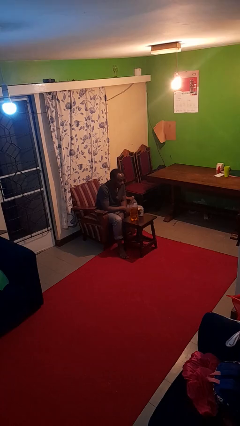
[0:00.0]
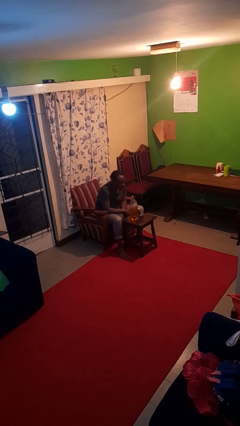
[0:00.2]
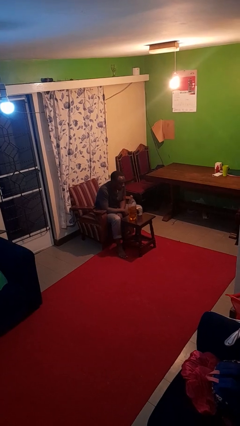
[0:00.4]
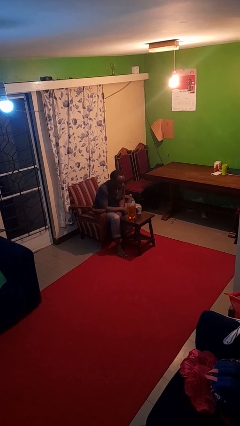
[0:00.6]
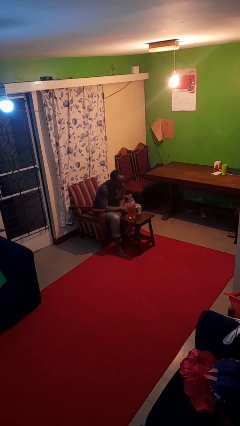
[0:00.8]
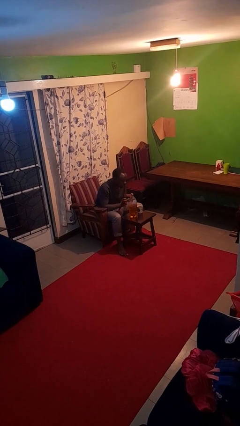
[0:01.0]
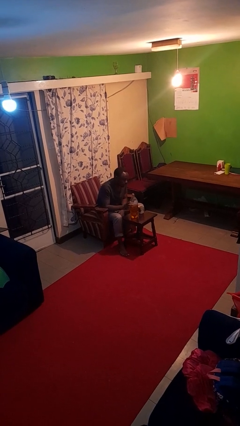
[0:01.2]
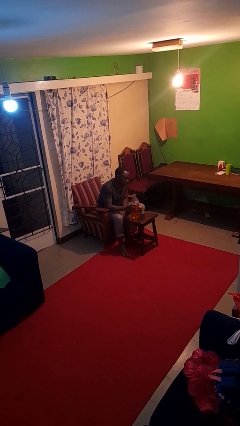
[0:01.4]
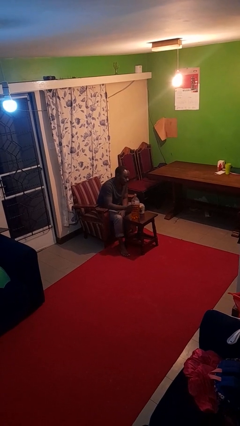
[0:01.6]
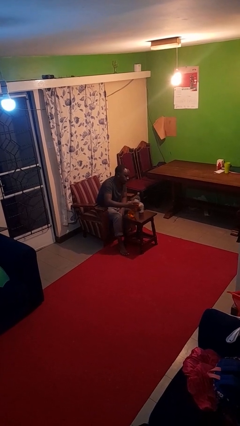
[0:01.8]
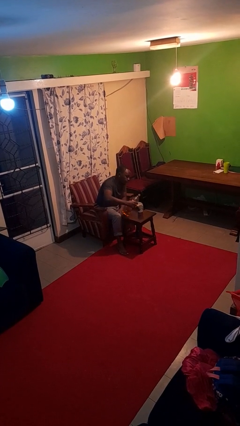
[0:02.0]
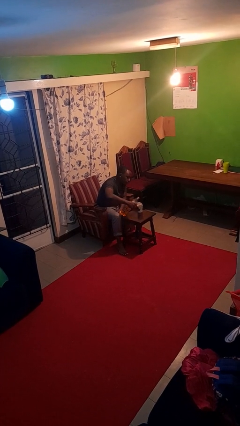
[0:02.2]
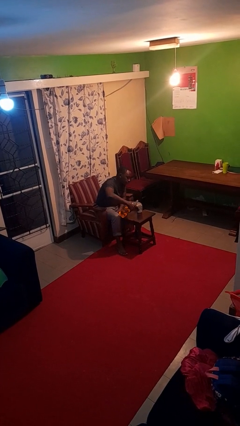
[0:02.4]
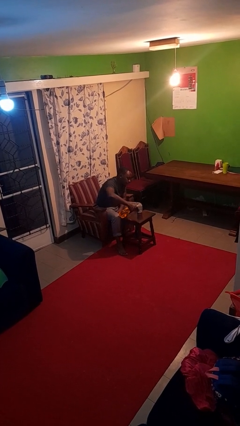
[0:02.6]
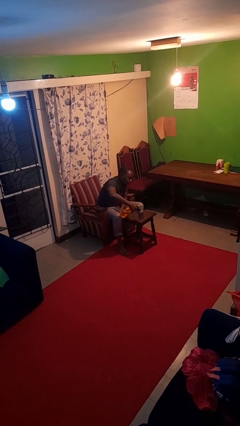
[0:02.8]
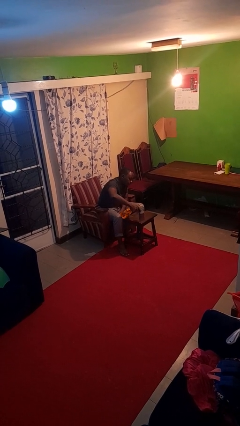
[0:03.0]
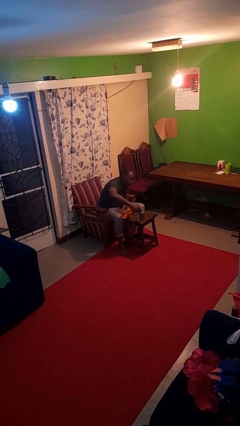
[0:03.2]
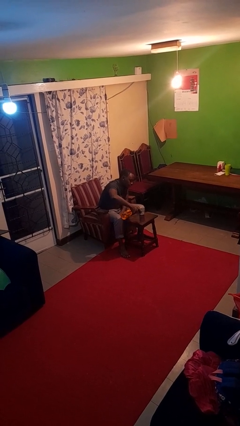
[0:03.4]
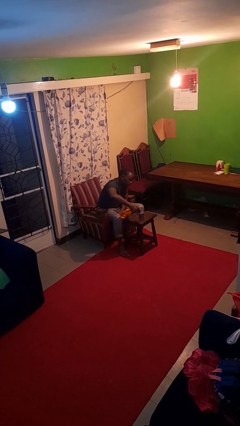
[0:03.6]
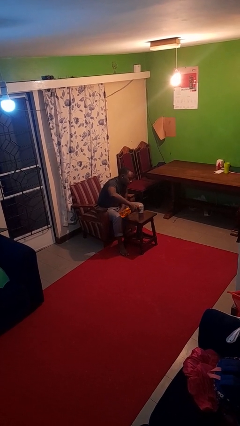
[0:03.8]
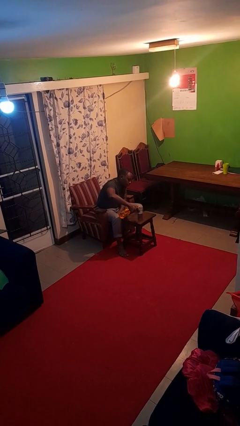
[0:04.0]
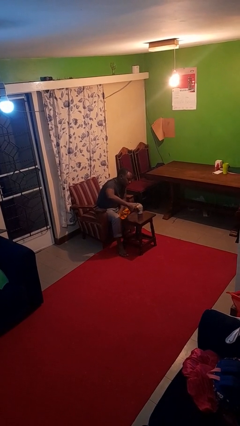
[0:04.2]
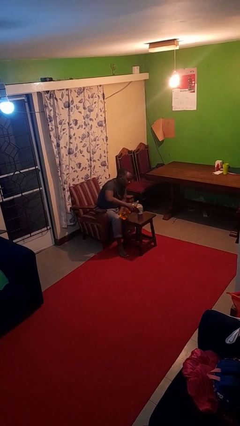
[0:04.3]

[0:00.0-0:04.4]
person pours liquid into cup

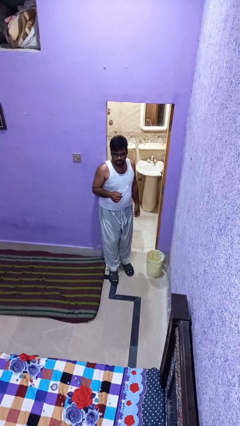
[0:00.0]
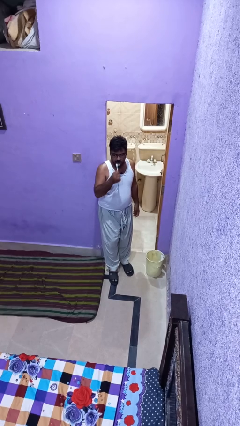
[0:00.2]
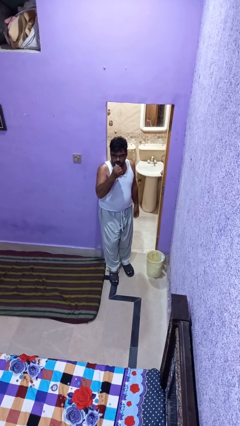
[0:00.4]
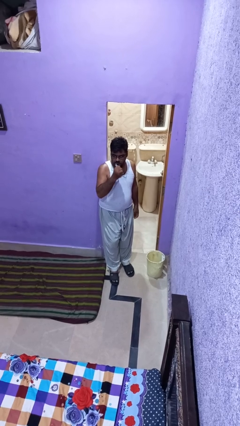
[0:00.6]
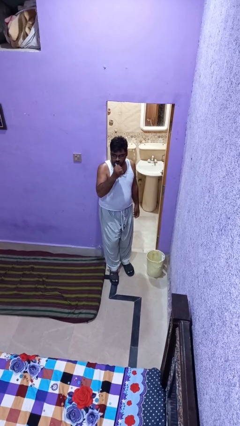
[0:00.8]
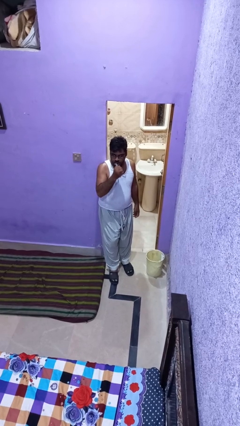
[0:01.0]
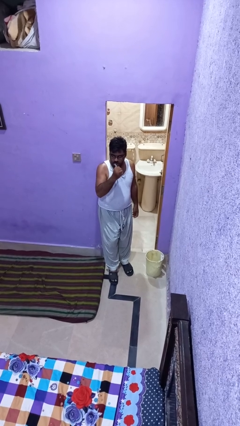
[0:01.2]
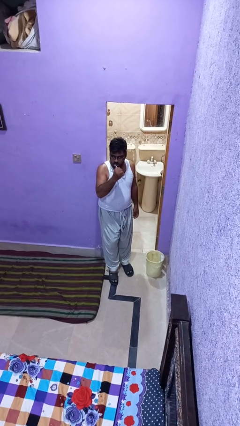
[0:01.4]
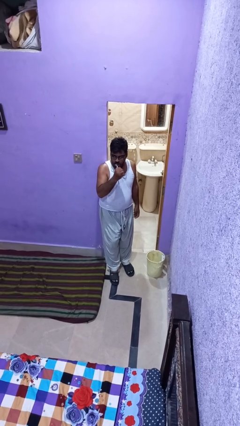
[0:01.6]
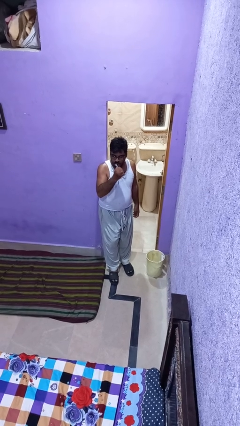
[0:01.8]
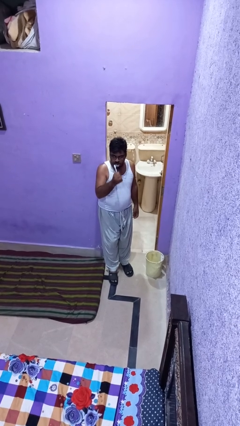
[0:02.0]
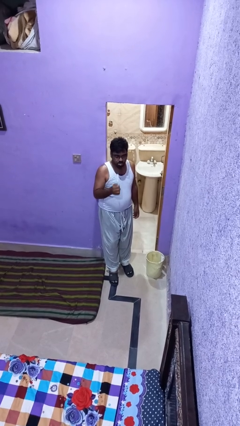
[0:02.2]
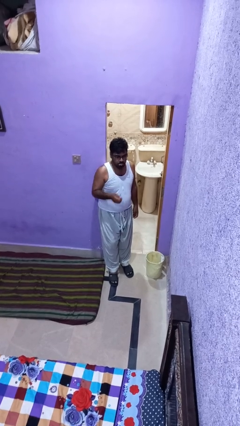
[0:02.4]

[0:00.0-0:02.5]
person brushes teeth

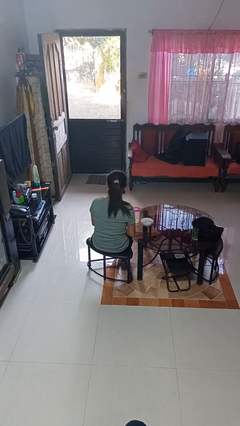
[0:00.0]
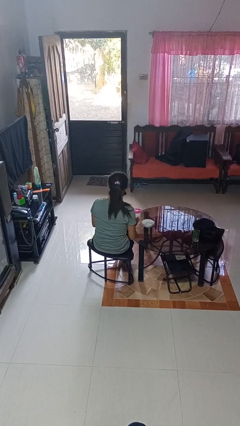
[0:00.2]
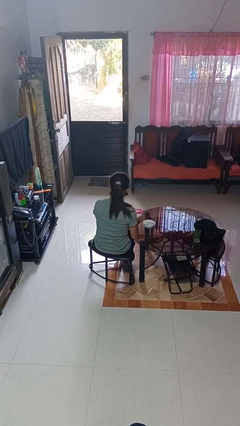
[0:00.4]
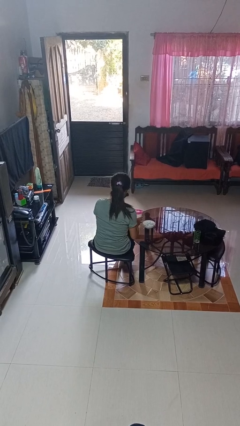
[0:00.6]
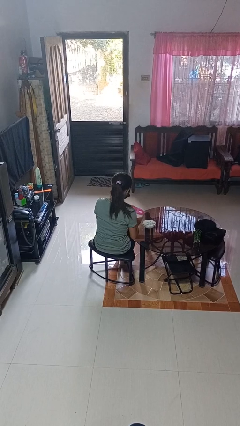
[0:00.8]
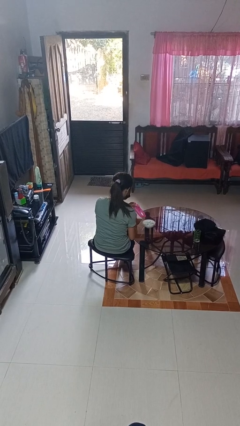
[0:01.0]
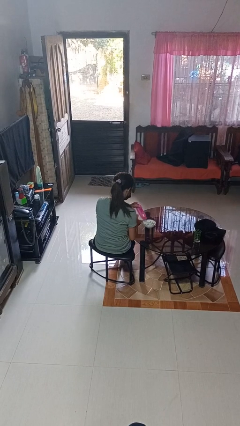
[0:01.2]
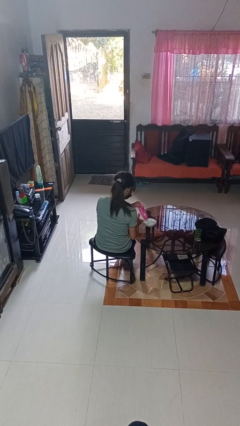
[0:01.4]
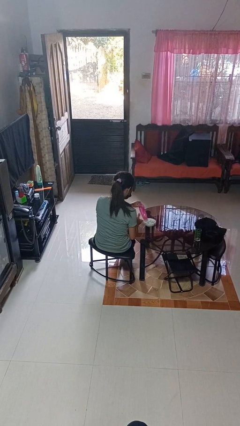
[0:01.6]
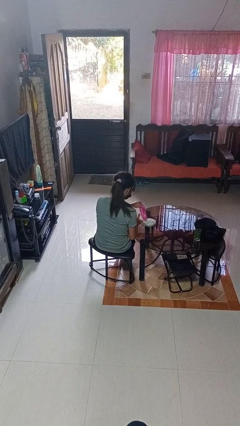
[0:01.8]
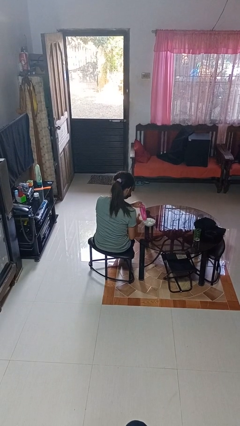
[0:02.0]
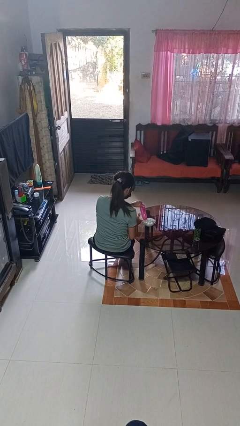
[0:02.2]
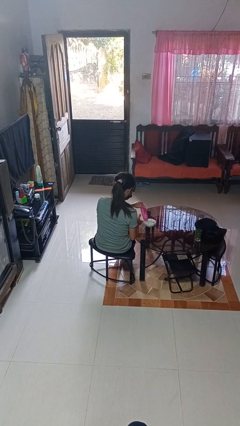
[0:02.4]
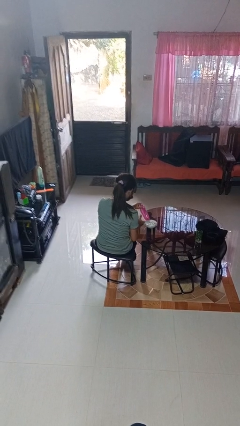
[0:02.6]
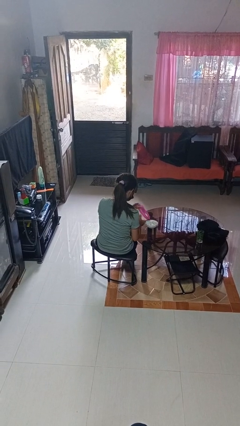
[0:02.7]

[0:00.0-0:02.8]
person pours into bowl

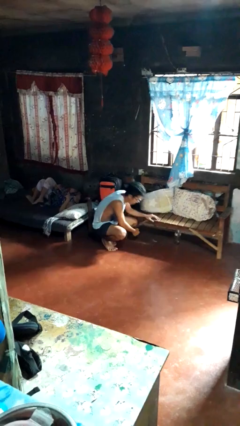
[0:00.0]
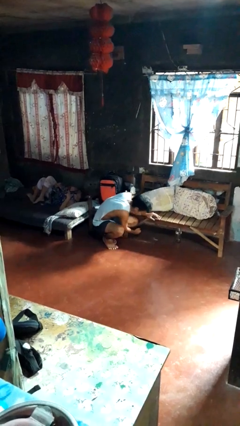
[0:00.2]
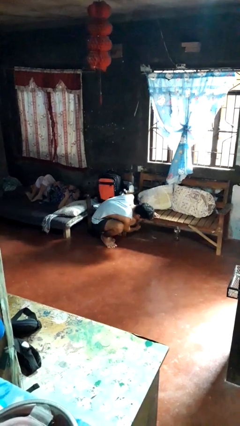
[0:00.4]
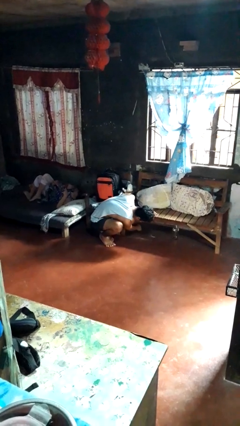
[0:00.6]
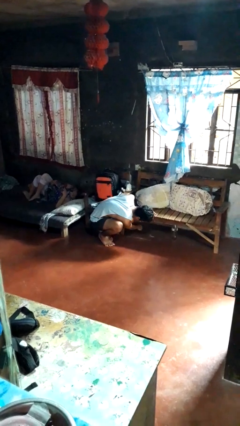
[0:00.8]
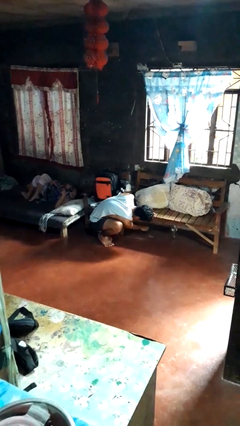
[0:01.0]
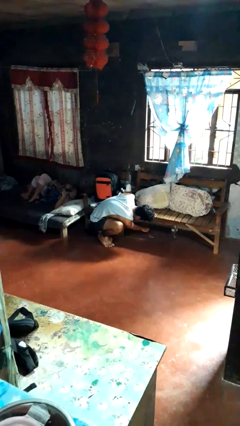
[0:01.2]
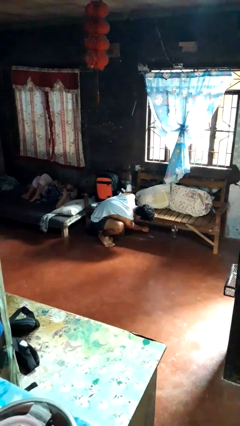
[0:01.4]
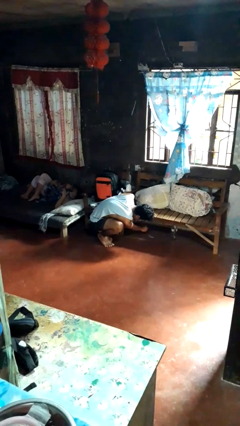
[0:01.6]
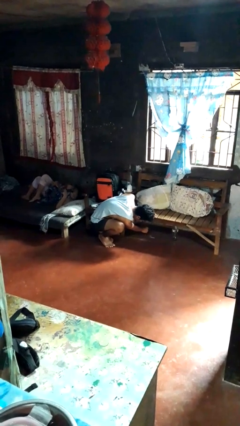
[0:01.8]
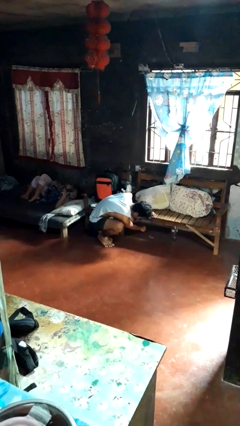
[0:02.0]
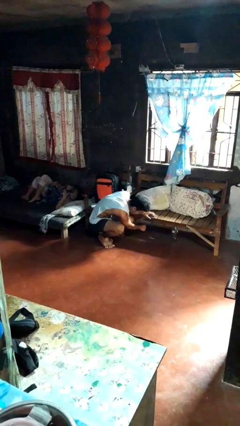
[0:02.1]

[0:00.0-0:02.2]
person searches under couch

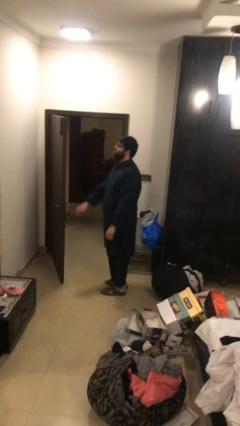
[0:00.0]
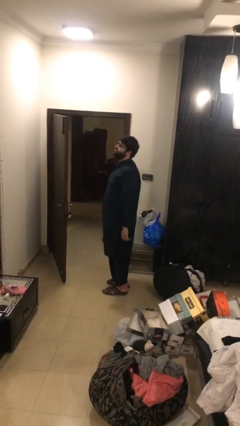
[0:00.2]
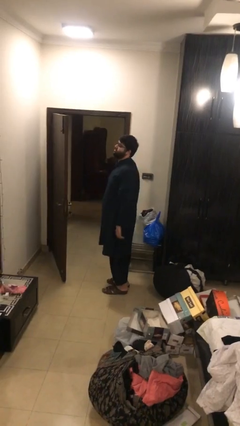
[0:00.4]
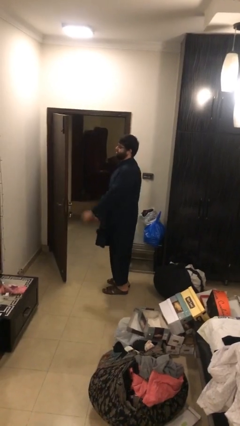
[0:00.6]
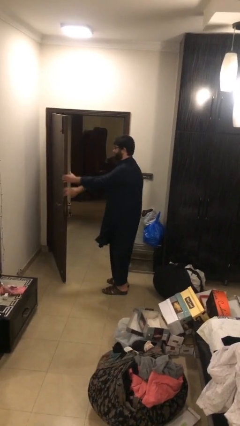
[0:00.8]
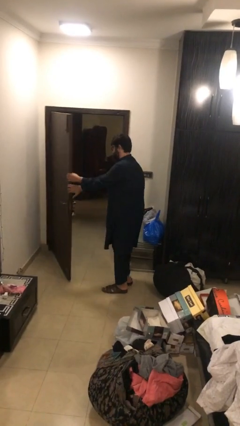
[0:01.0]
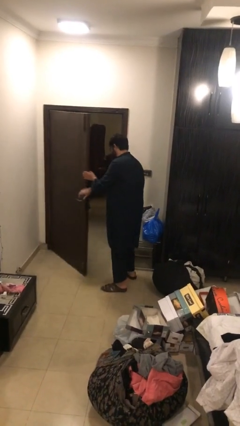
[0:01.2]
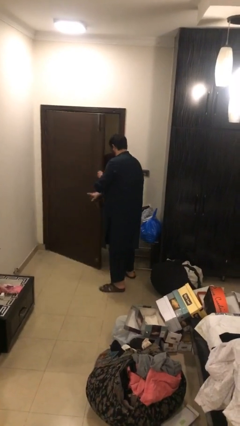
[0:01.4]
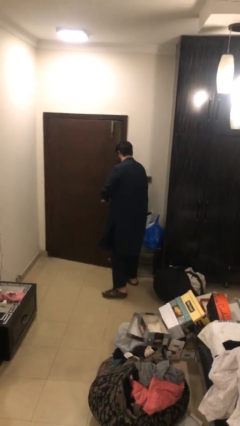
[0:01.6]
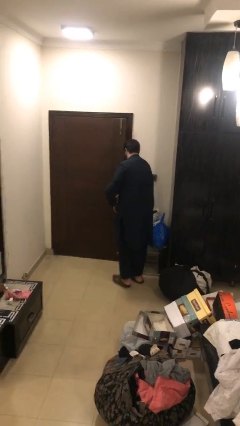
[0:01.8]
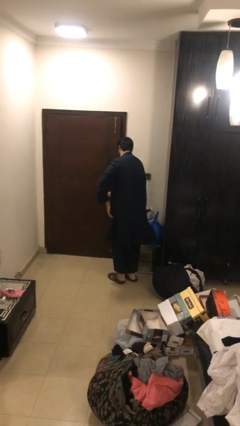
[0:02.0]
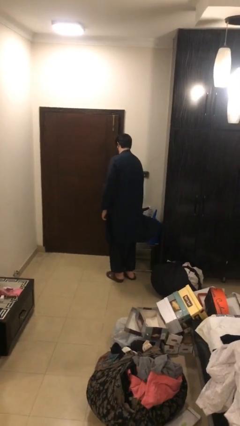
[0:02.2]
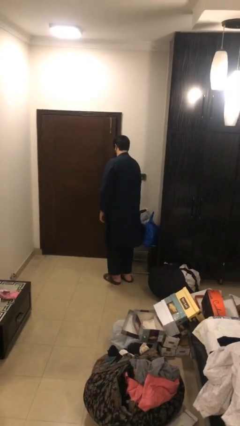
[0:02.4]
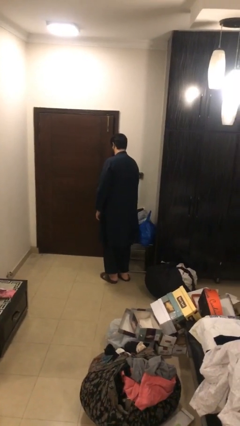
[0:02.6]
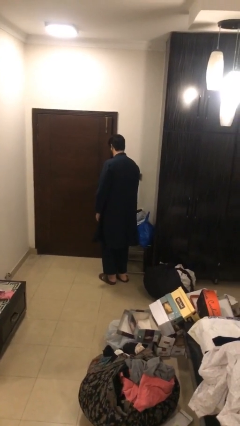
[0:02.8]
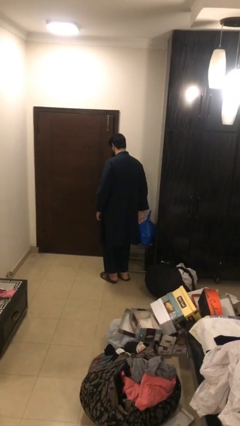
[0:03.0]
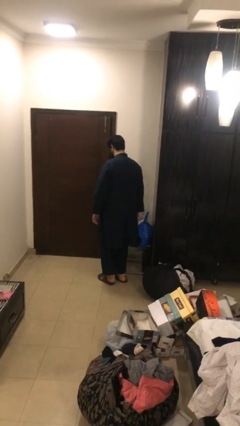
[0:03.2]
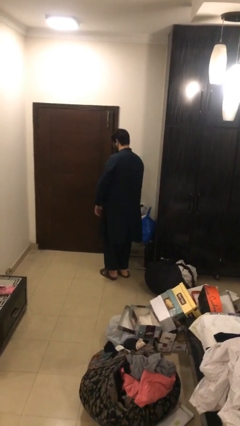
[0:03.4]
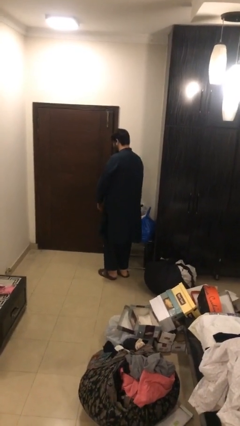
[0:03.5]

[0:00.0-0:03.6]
person closes facility door

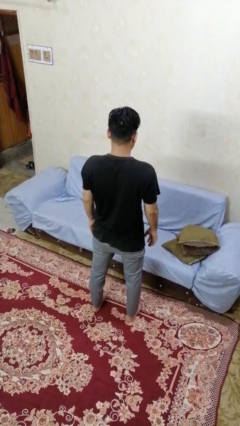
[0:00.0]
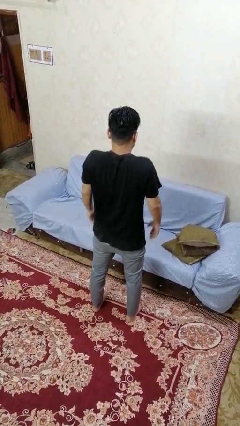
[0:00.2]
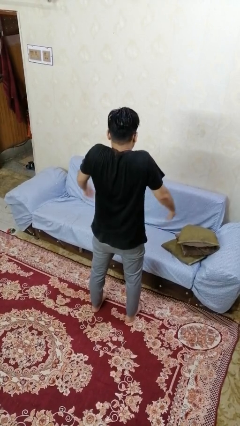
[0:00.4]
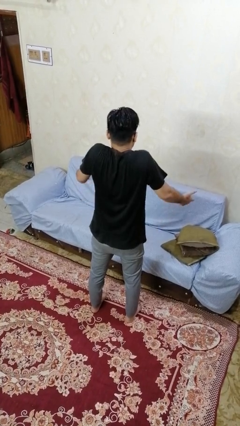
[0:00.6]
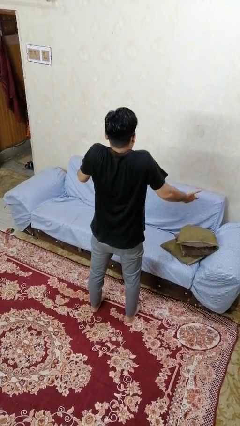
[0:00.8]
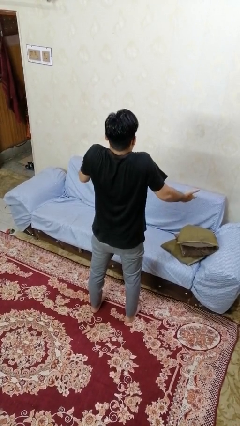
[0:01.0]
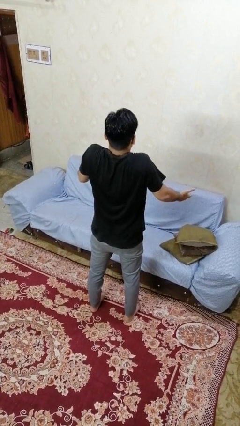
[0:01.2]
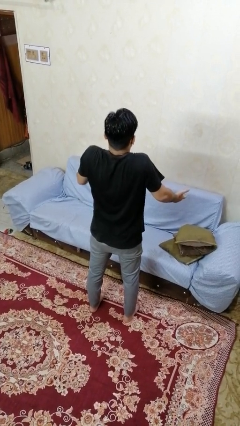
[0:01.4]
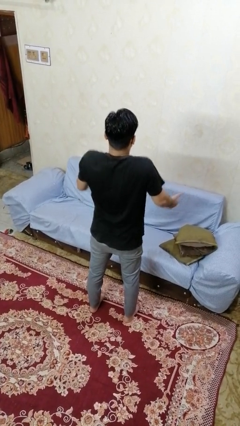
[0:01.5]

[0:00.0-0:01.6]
person shrugs

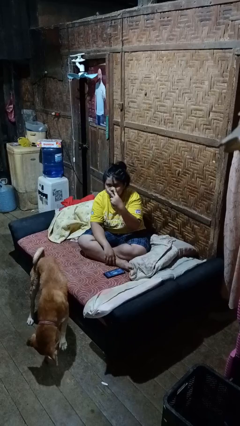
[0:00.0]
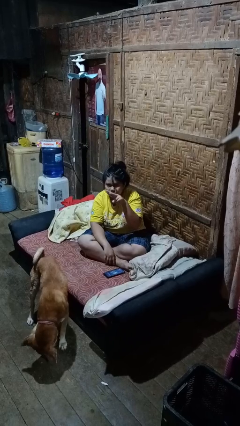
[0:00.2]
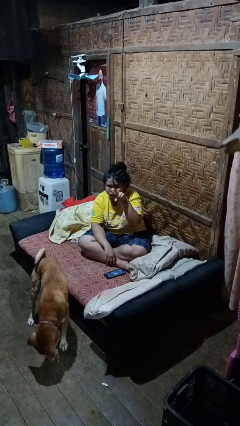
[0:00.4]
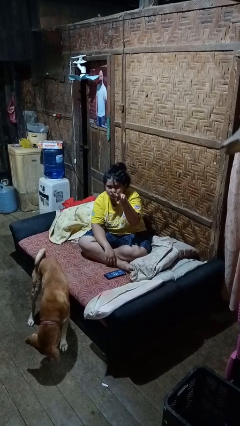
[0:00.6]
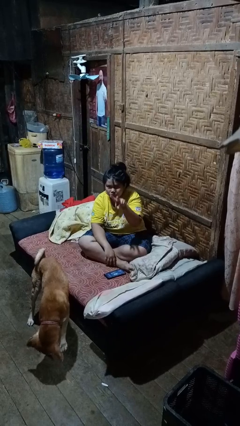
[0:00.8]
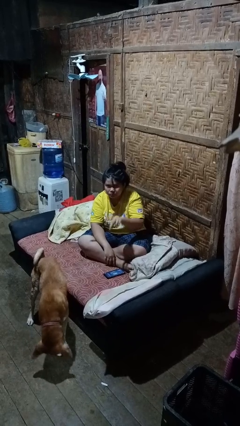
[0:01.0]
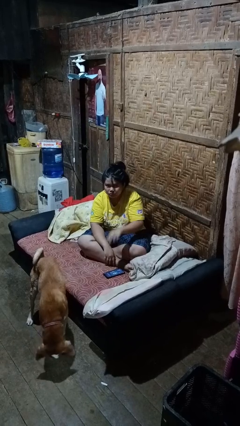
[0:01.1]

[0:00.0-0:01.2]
person gestures watch closely
